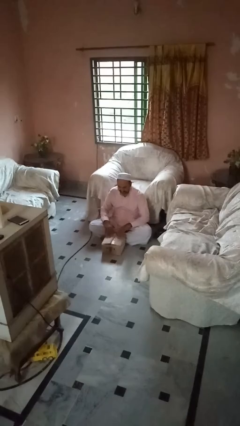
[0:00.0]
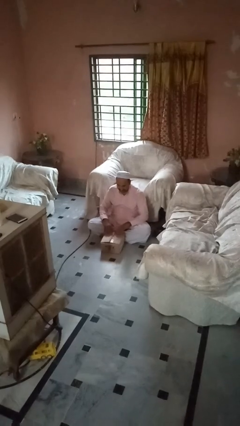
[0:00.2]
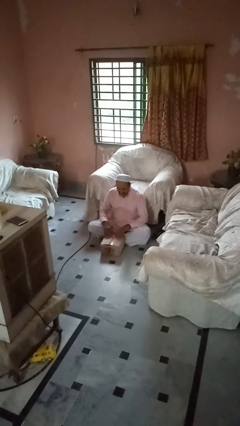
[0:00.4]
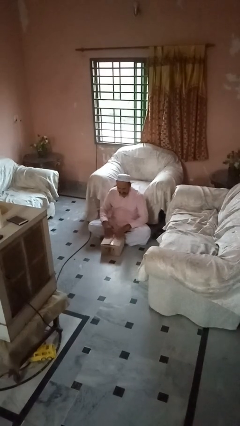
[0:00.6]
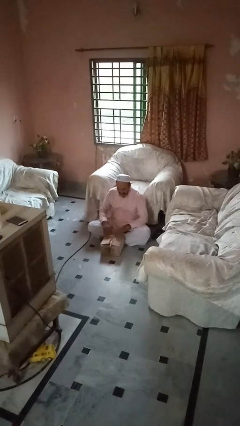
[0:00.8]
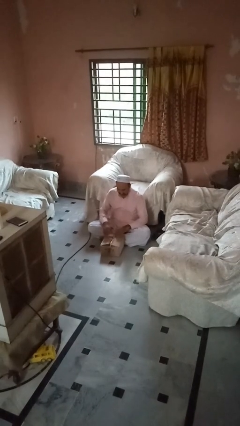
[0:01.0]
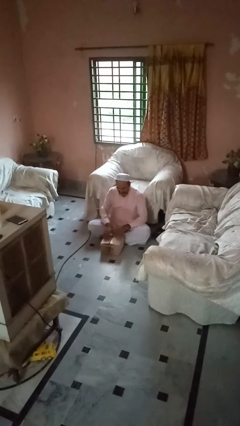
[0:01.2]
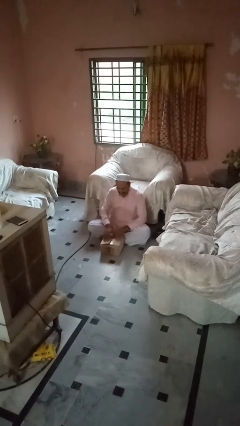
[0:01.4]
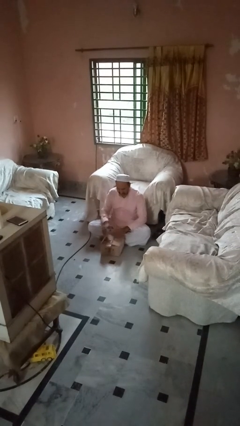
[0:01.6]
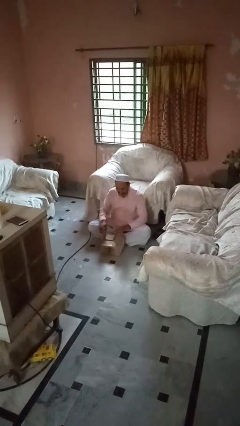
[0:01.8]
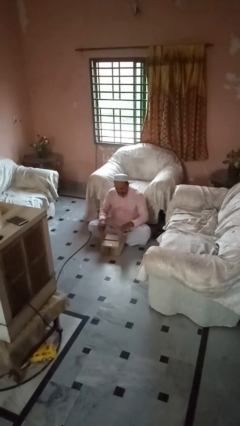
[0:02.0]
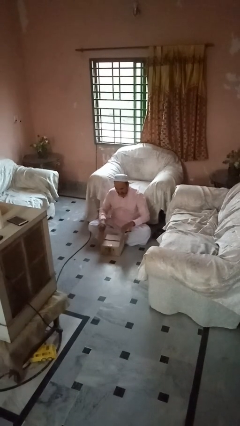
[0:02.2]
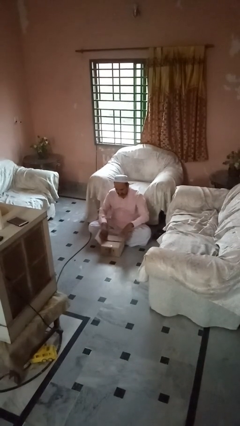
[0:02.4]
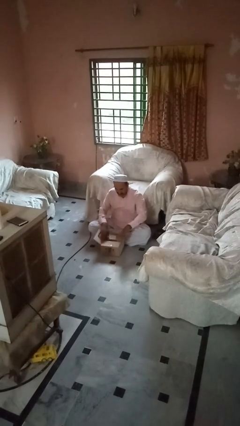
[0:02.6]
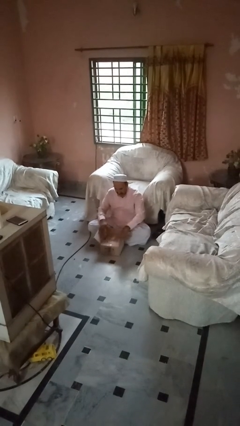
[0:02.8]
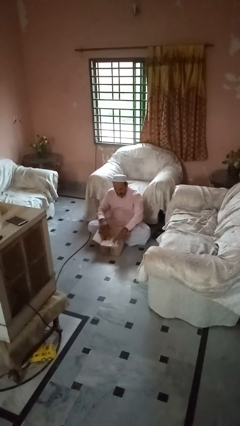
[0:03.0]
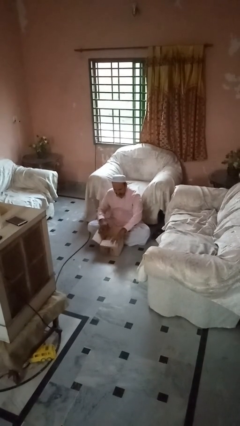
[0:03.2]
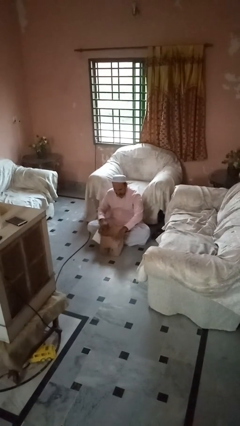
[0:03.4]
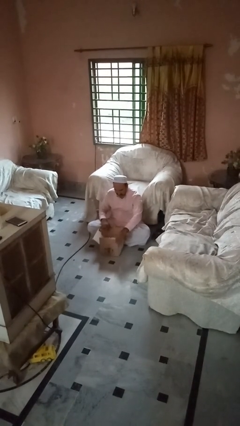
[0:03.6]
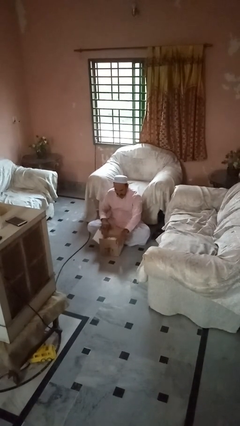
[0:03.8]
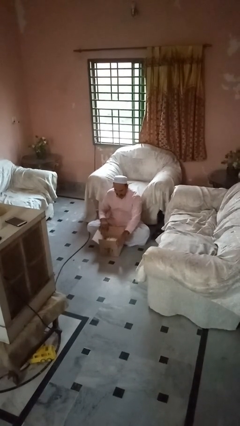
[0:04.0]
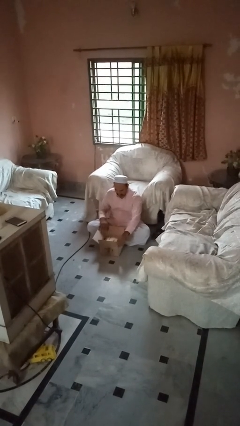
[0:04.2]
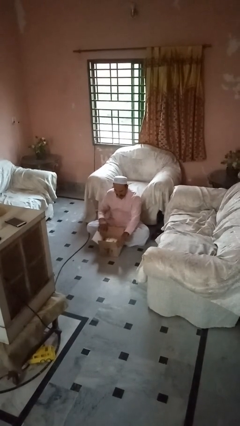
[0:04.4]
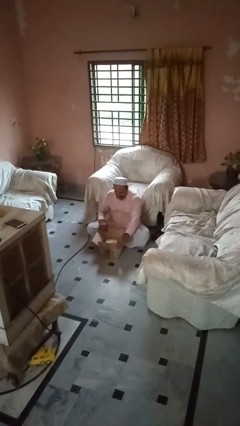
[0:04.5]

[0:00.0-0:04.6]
person opens box

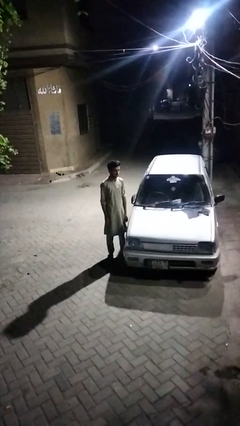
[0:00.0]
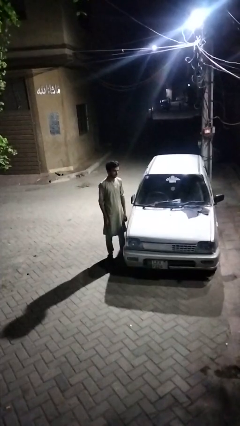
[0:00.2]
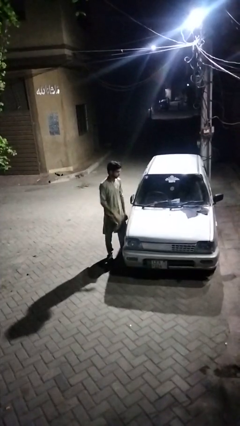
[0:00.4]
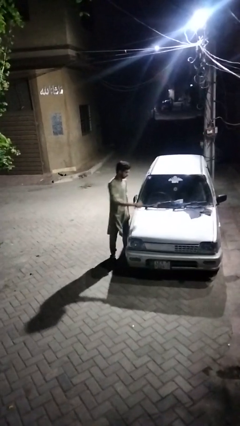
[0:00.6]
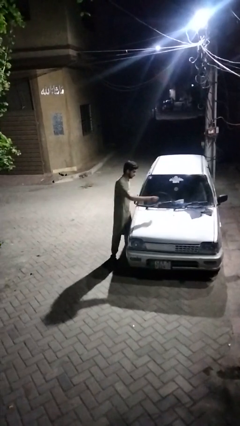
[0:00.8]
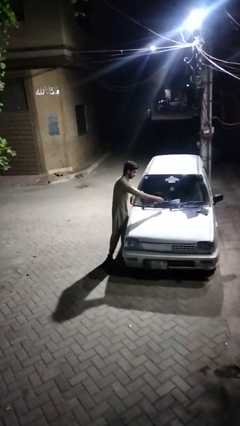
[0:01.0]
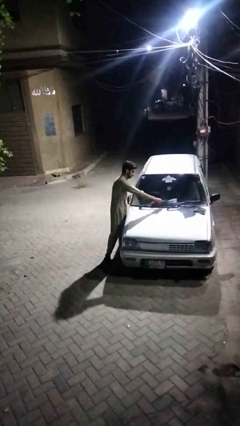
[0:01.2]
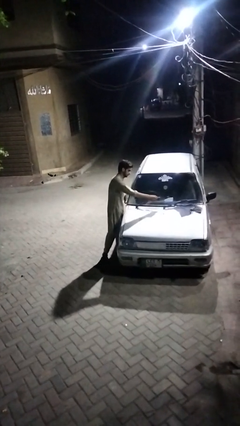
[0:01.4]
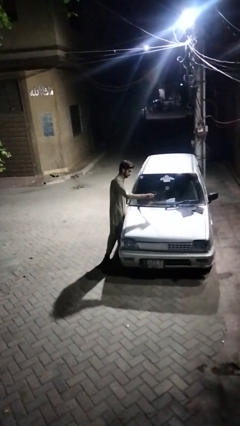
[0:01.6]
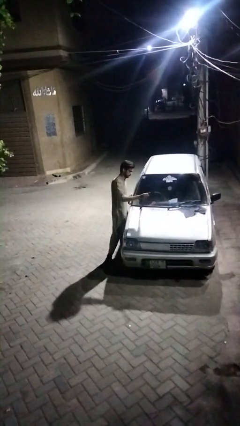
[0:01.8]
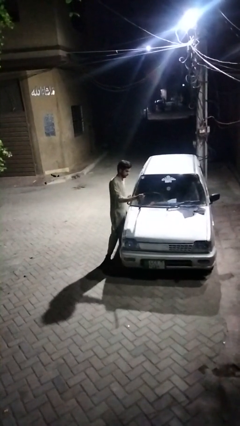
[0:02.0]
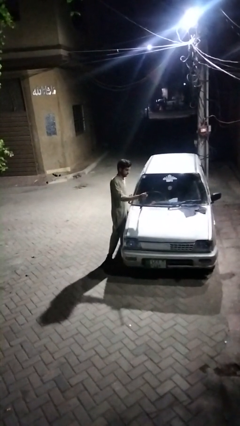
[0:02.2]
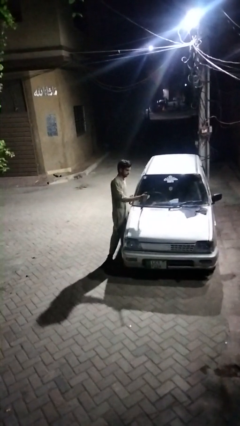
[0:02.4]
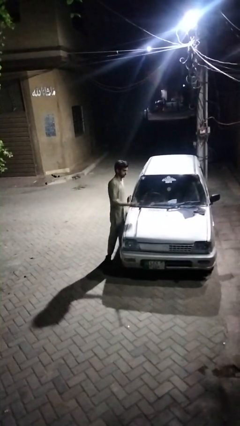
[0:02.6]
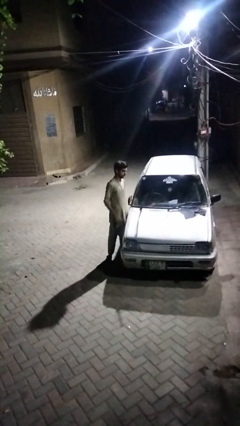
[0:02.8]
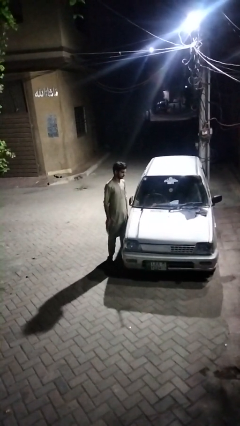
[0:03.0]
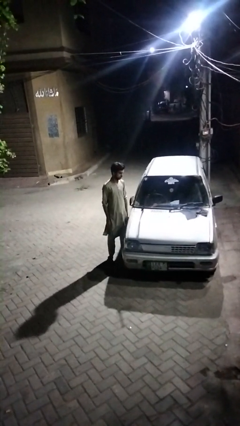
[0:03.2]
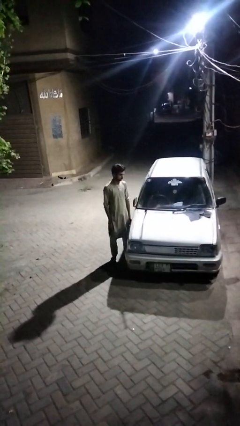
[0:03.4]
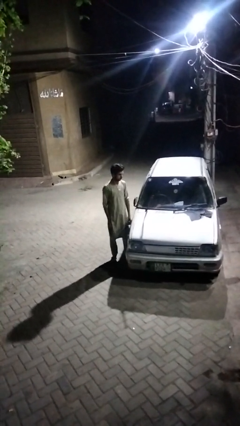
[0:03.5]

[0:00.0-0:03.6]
person flips up car wipers

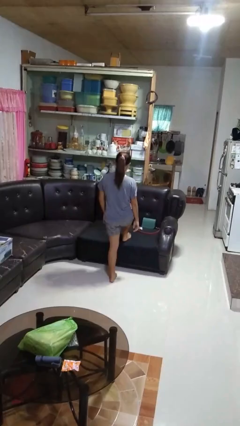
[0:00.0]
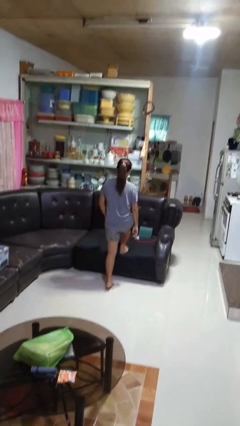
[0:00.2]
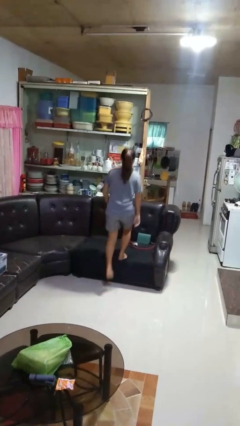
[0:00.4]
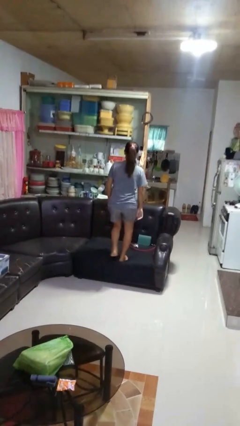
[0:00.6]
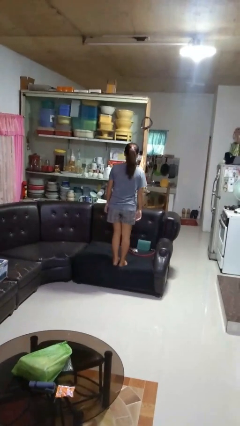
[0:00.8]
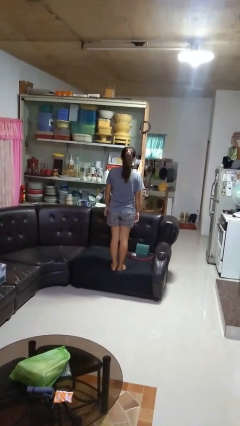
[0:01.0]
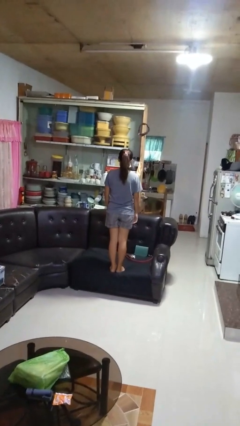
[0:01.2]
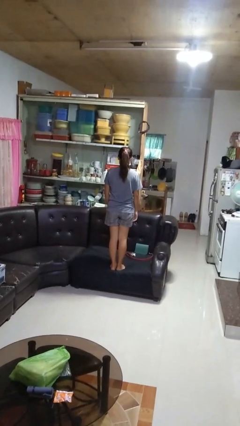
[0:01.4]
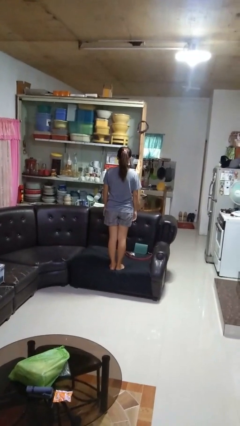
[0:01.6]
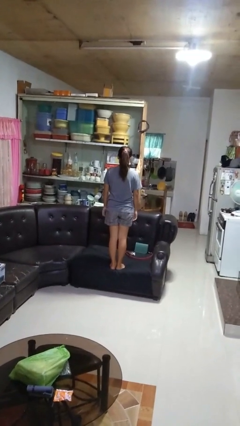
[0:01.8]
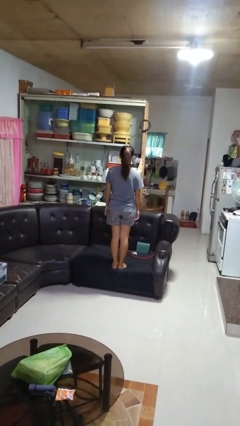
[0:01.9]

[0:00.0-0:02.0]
person climbs on couch

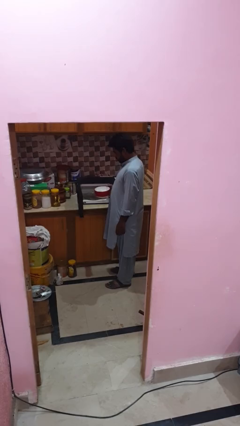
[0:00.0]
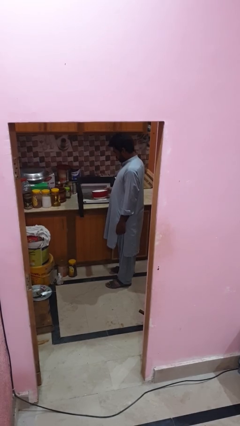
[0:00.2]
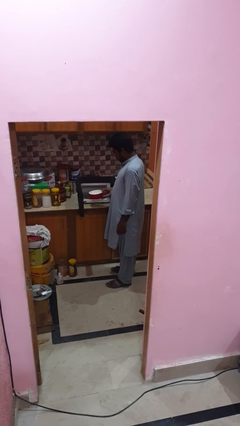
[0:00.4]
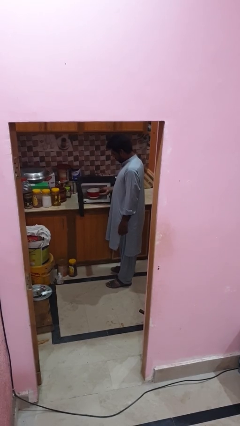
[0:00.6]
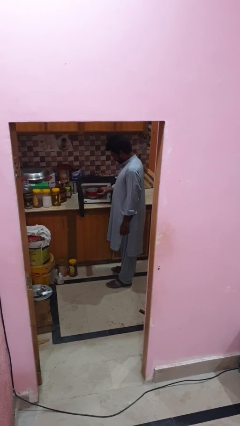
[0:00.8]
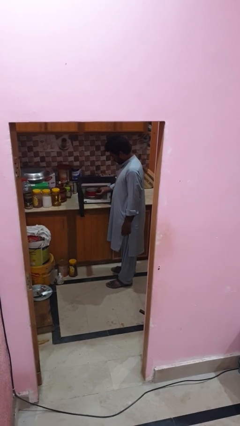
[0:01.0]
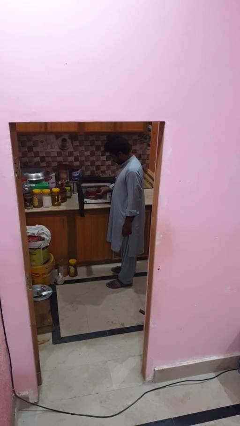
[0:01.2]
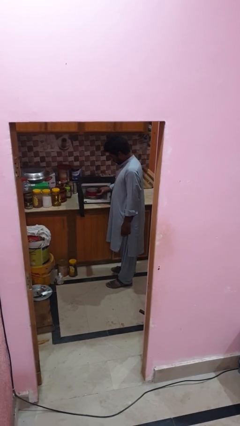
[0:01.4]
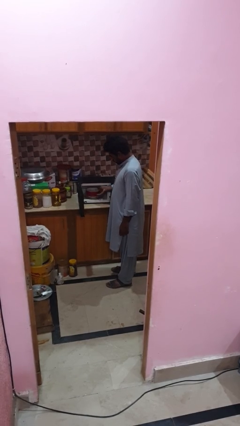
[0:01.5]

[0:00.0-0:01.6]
person puts object into microwave

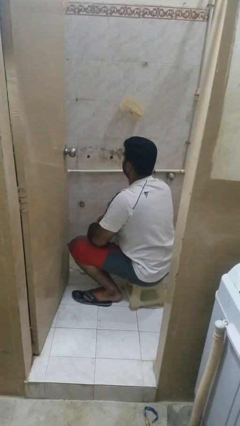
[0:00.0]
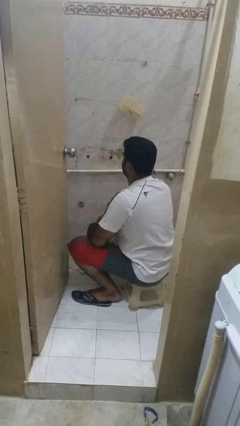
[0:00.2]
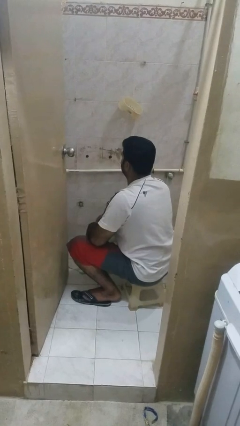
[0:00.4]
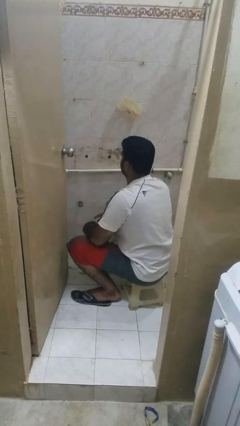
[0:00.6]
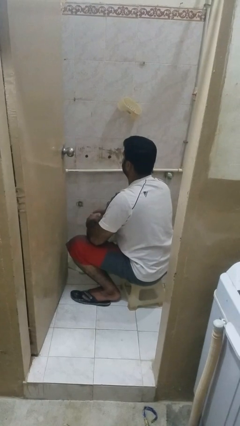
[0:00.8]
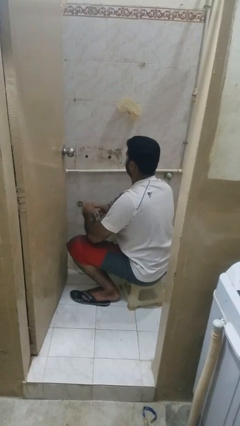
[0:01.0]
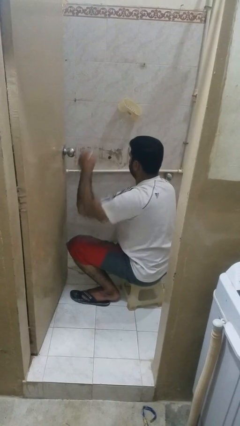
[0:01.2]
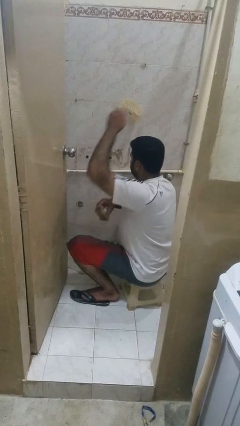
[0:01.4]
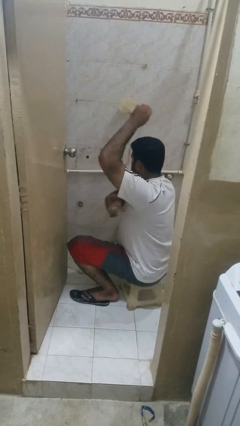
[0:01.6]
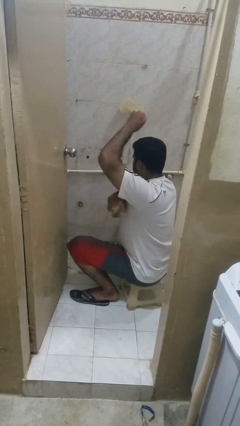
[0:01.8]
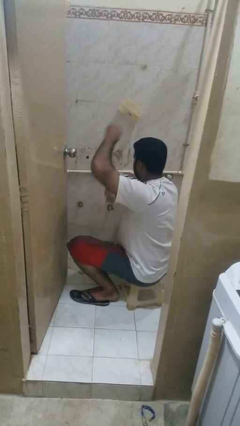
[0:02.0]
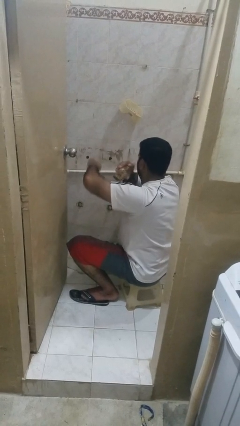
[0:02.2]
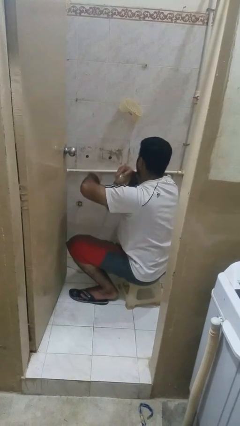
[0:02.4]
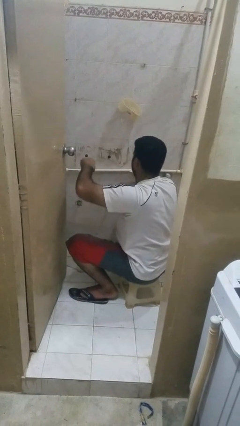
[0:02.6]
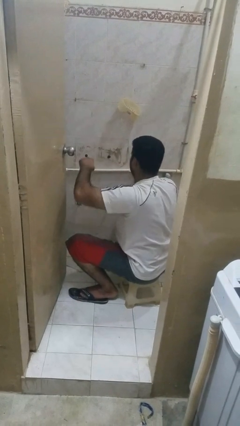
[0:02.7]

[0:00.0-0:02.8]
person applies deodorant

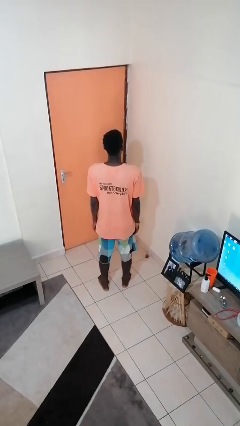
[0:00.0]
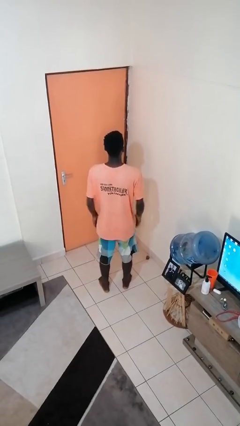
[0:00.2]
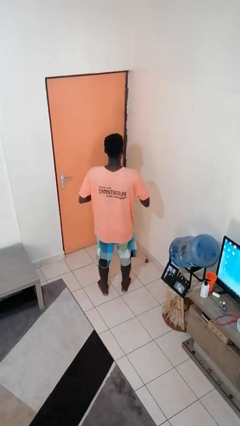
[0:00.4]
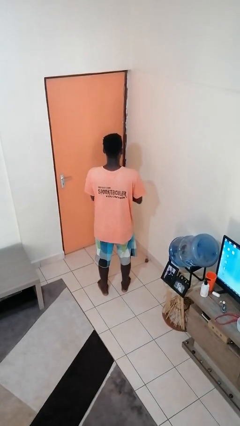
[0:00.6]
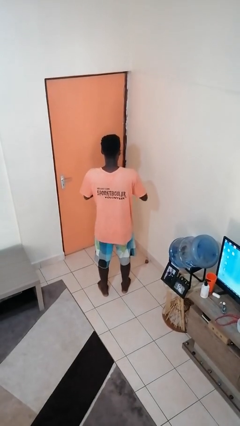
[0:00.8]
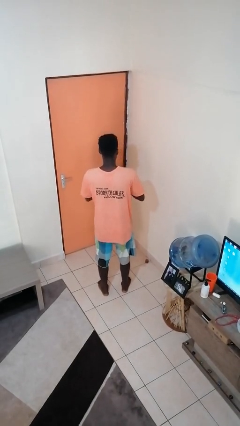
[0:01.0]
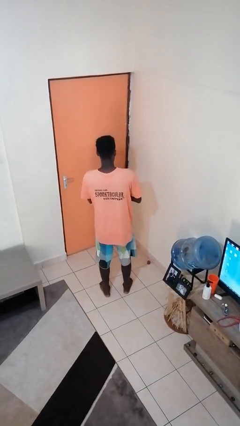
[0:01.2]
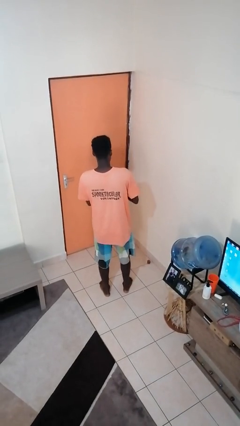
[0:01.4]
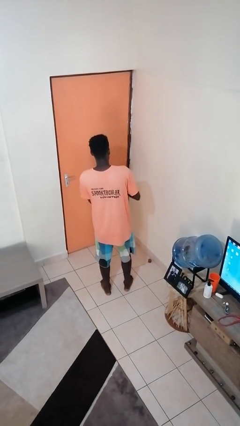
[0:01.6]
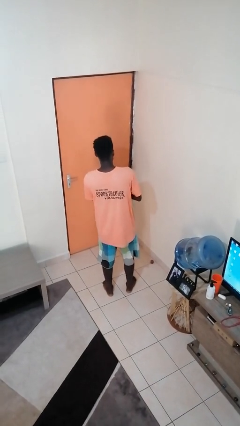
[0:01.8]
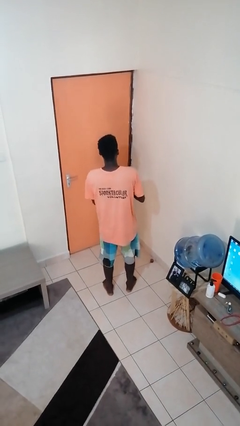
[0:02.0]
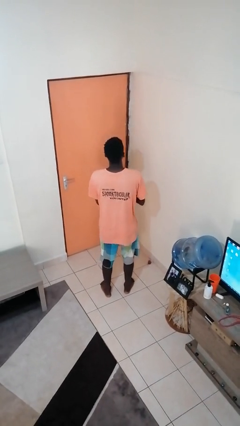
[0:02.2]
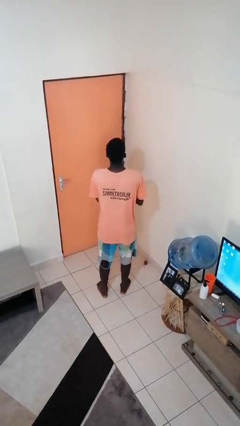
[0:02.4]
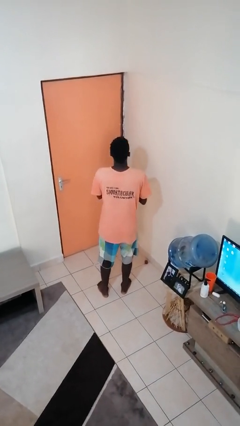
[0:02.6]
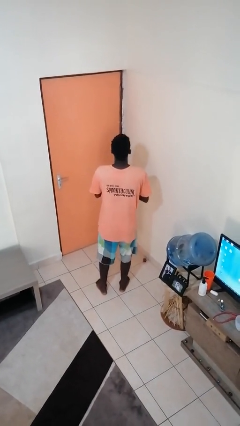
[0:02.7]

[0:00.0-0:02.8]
person claps hands
